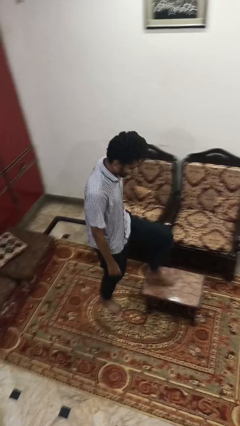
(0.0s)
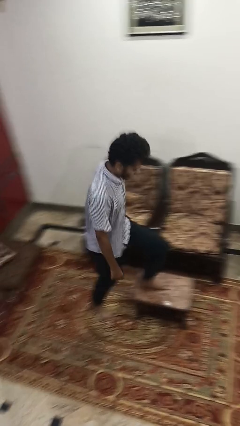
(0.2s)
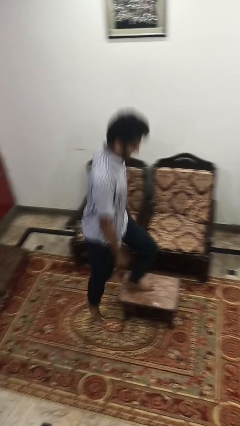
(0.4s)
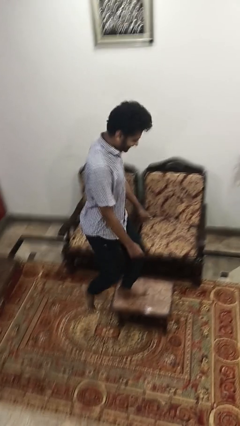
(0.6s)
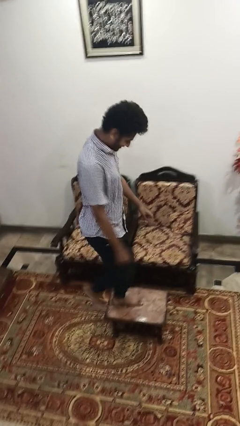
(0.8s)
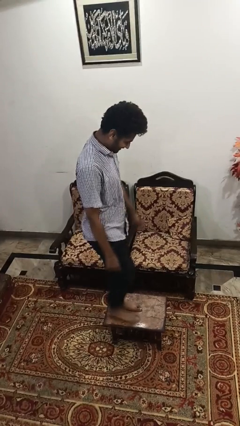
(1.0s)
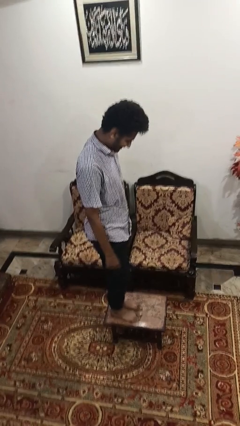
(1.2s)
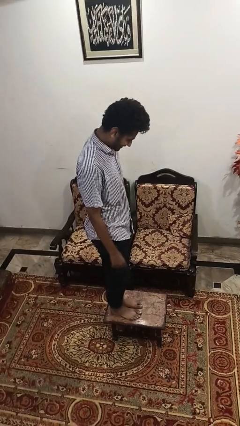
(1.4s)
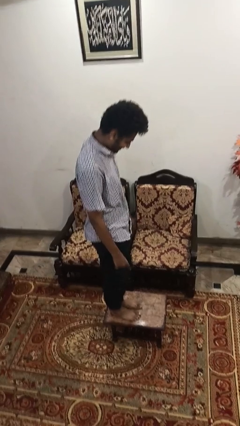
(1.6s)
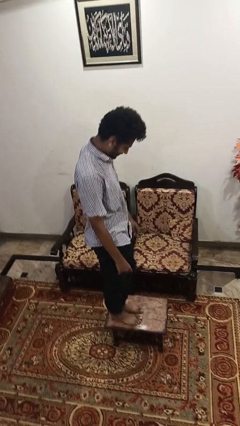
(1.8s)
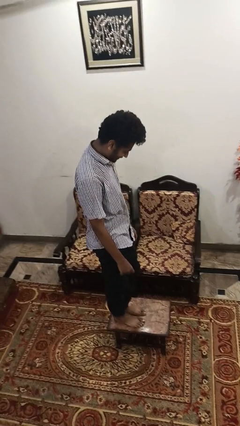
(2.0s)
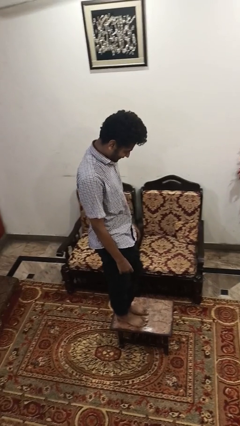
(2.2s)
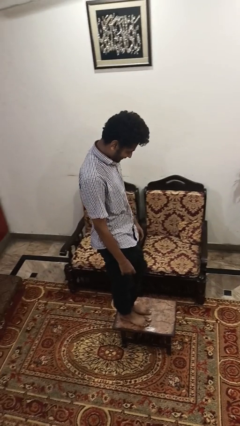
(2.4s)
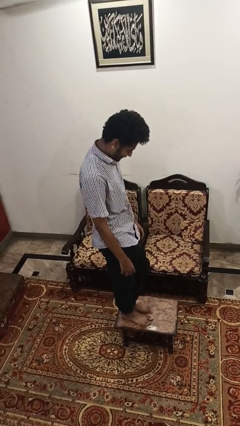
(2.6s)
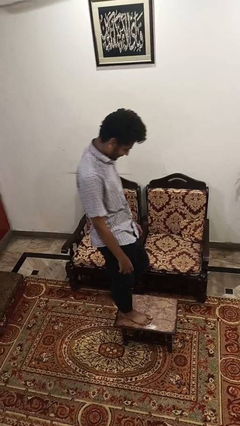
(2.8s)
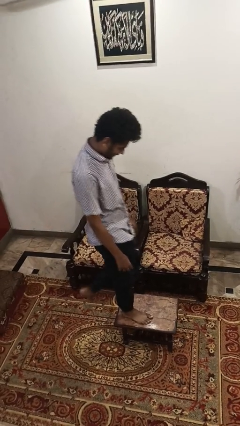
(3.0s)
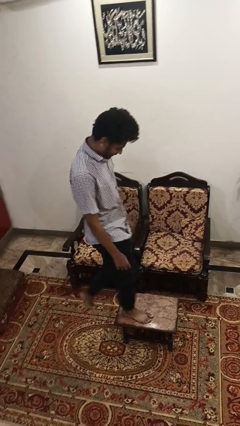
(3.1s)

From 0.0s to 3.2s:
person climbs on table

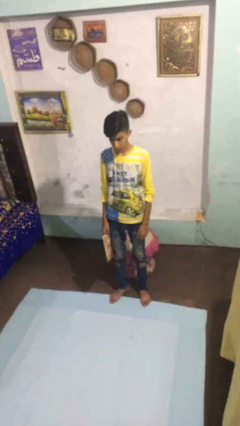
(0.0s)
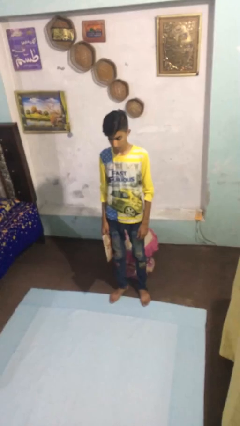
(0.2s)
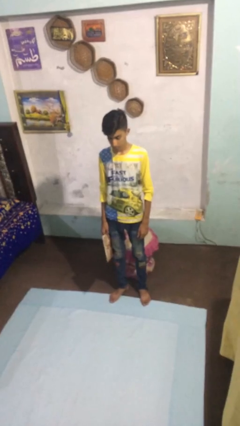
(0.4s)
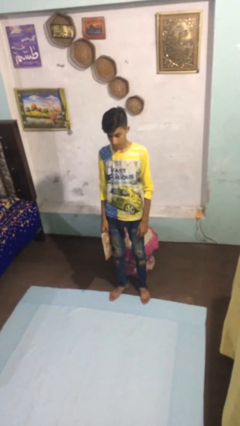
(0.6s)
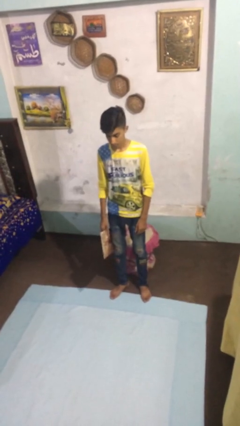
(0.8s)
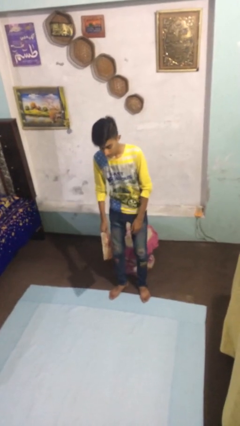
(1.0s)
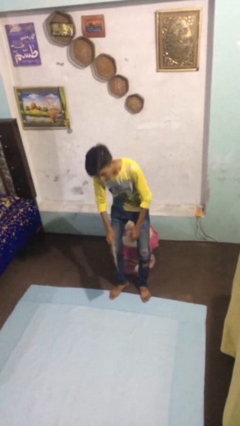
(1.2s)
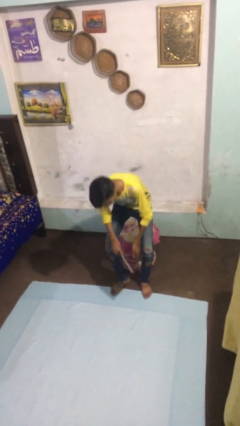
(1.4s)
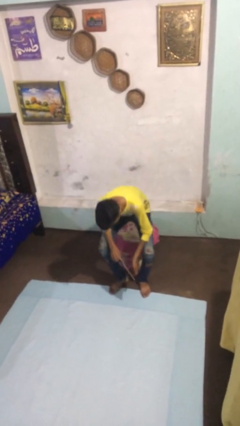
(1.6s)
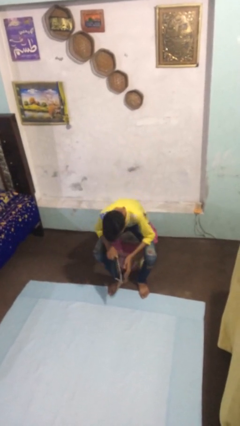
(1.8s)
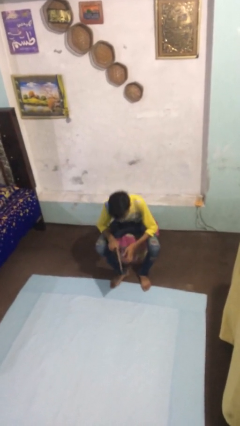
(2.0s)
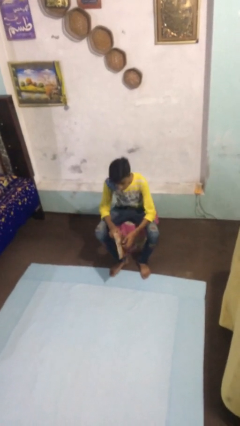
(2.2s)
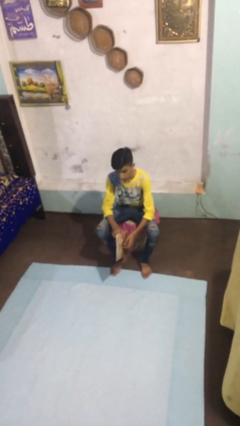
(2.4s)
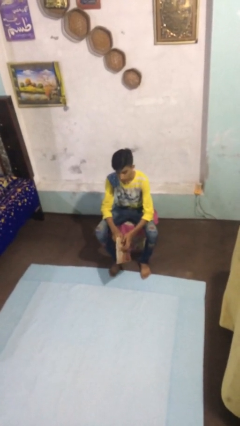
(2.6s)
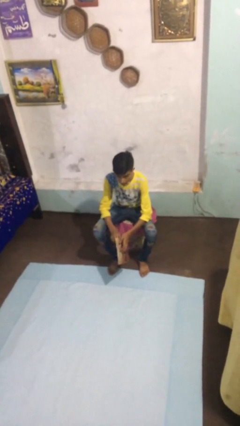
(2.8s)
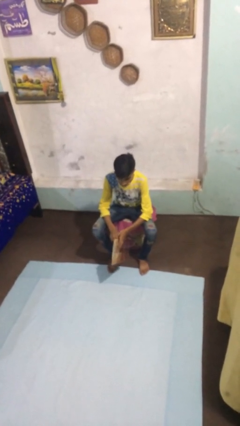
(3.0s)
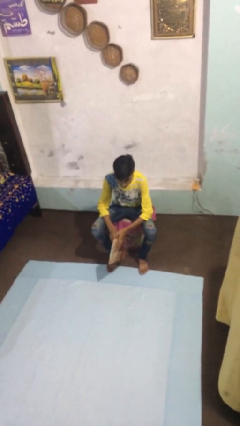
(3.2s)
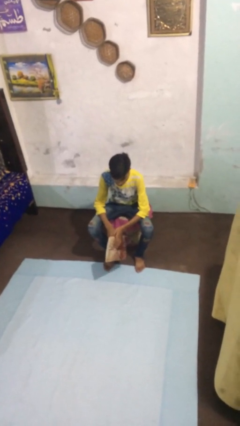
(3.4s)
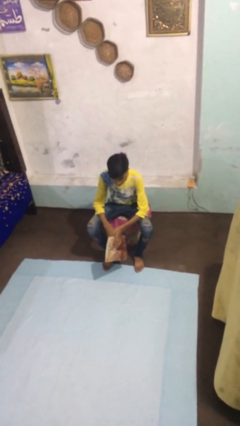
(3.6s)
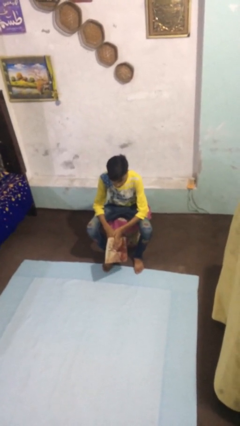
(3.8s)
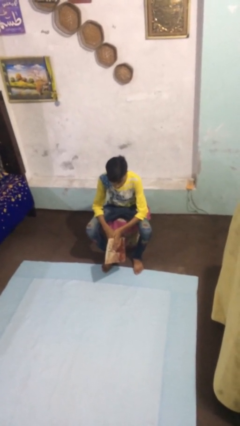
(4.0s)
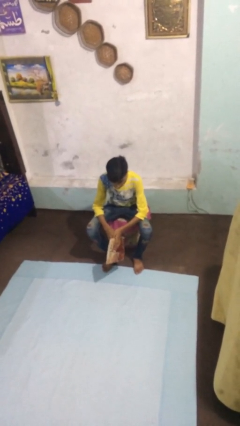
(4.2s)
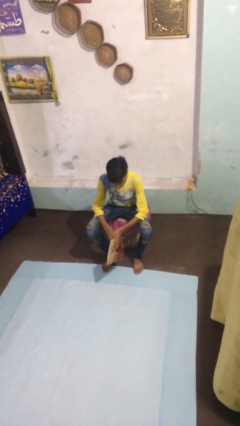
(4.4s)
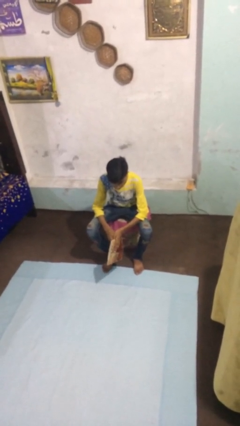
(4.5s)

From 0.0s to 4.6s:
person sits down

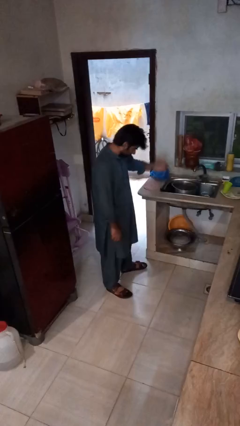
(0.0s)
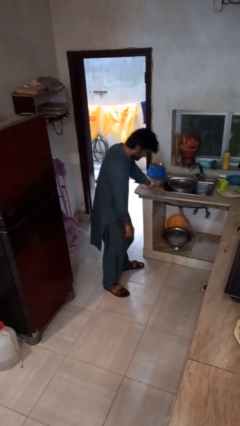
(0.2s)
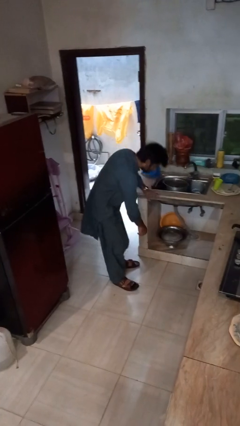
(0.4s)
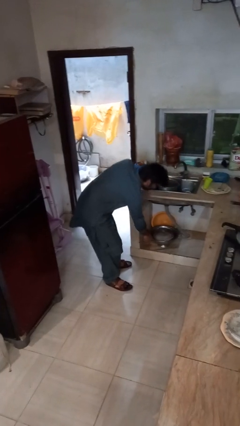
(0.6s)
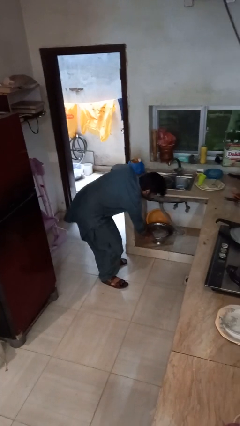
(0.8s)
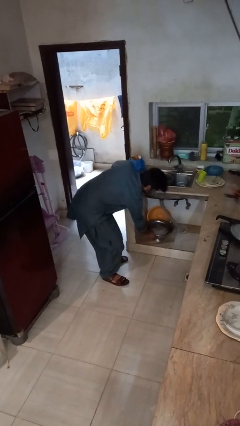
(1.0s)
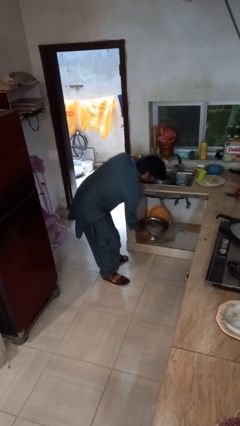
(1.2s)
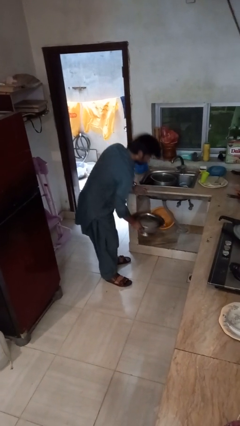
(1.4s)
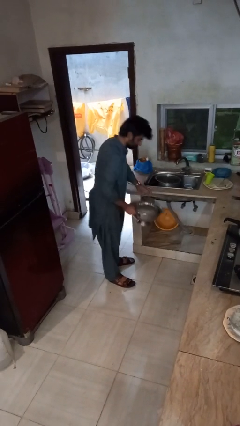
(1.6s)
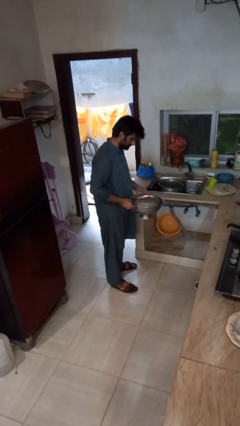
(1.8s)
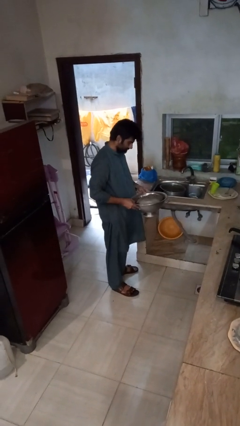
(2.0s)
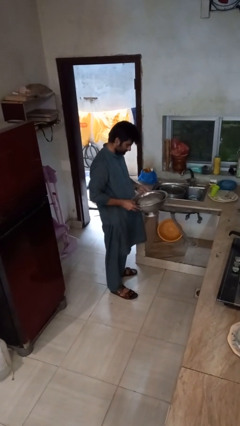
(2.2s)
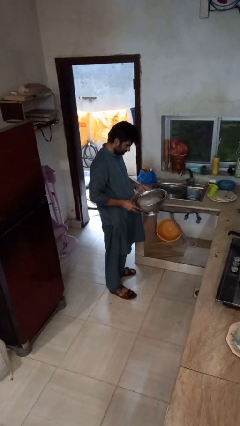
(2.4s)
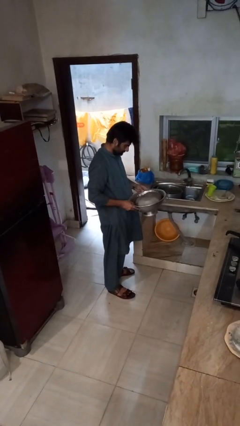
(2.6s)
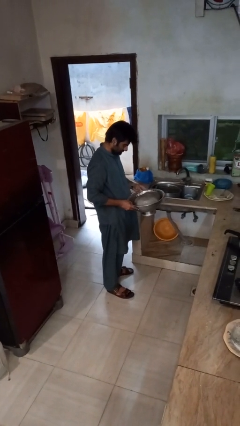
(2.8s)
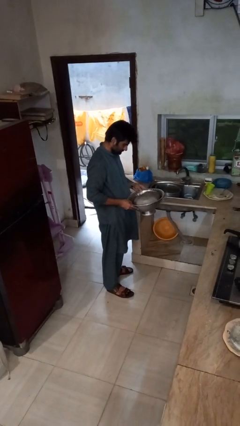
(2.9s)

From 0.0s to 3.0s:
person picks up object from cabinet

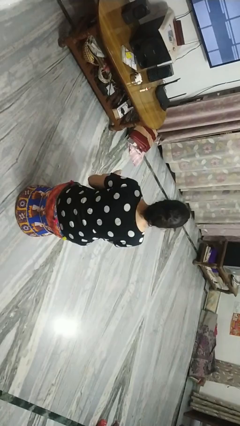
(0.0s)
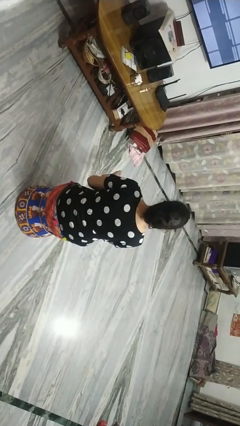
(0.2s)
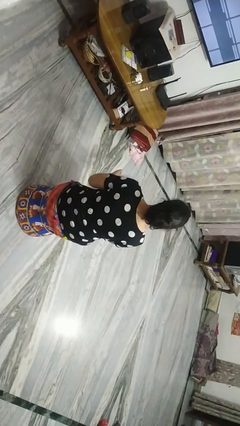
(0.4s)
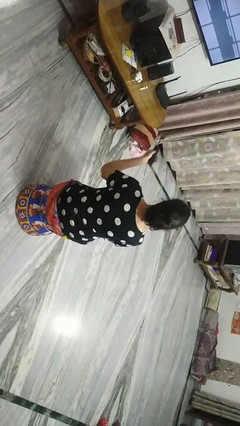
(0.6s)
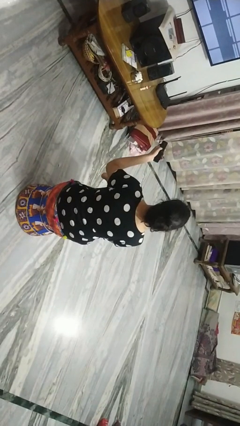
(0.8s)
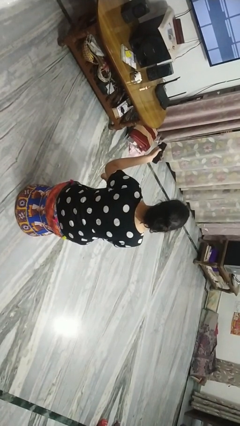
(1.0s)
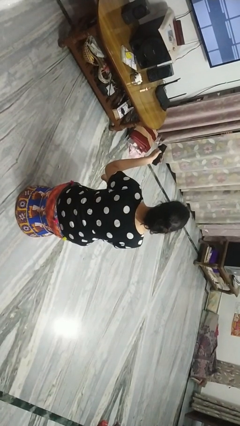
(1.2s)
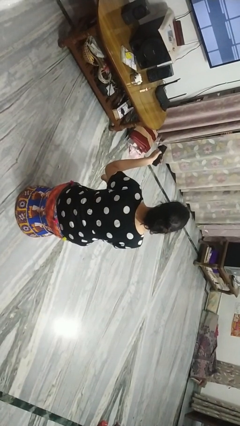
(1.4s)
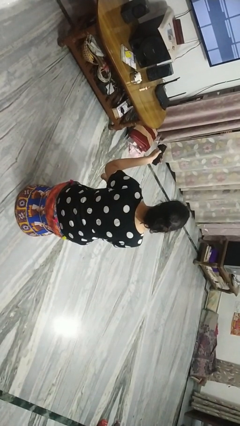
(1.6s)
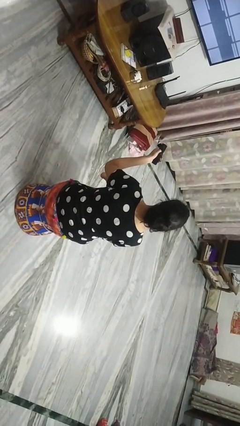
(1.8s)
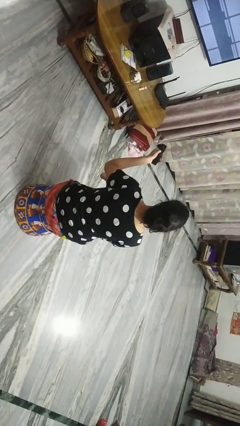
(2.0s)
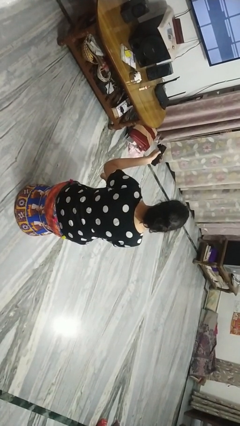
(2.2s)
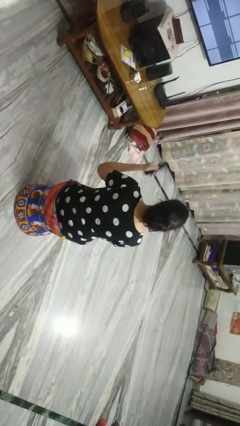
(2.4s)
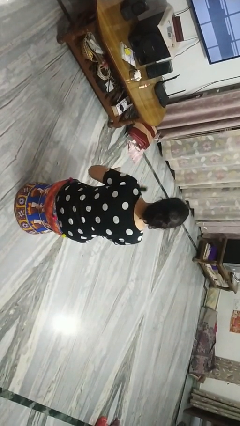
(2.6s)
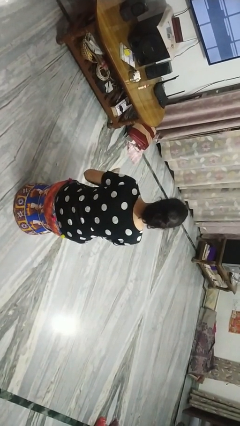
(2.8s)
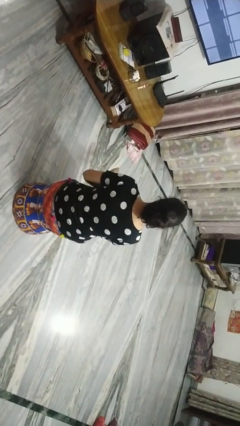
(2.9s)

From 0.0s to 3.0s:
person uses television remote

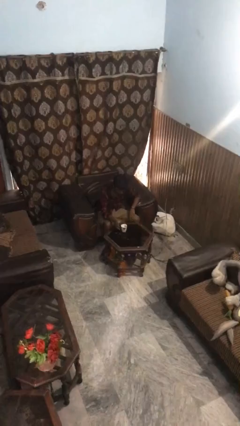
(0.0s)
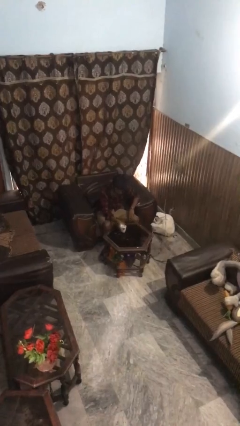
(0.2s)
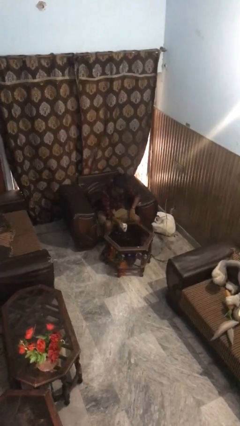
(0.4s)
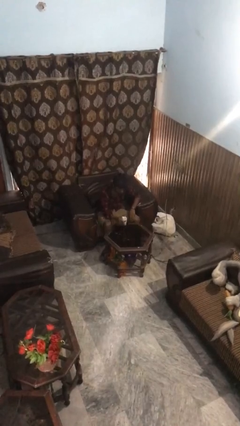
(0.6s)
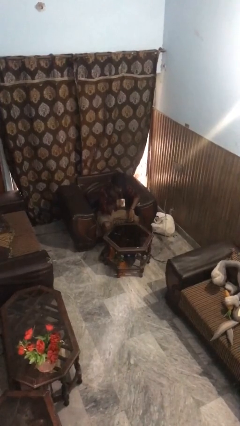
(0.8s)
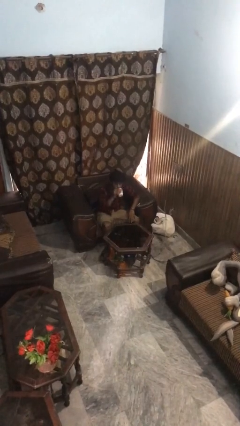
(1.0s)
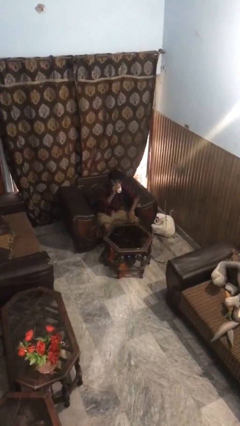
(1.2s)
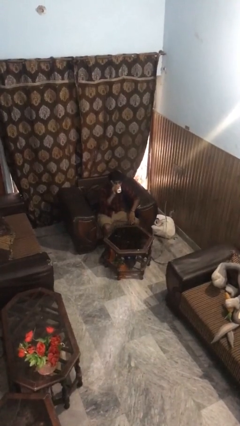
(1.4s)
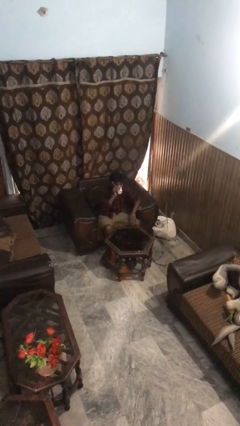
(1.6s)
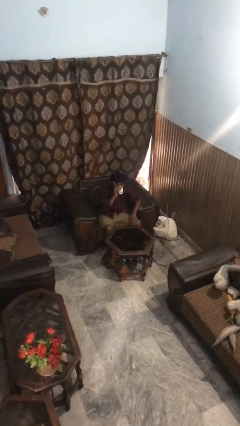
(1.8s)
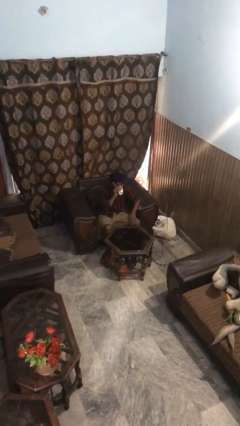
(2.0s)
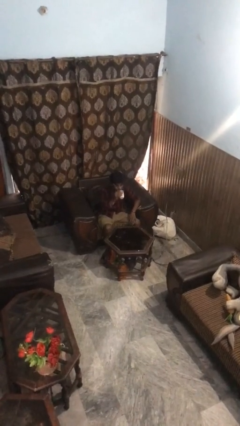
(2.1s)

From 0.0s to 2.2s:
person drinks from mug

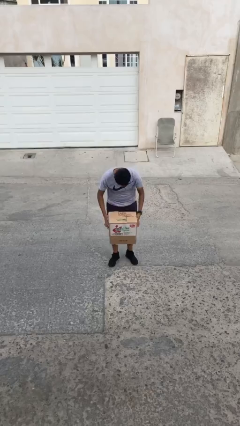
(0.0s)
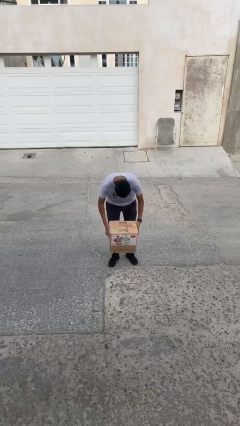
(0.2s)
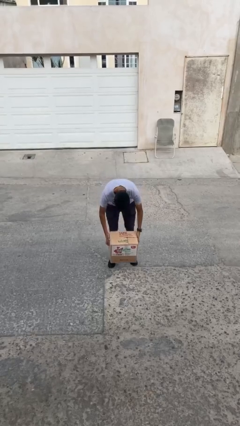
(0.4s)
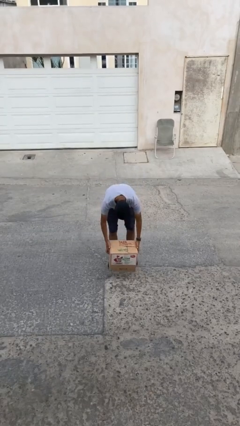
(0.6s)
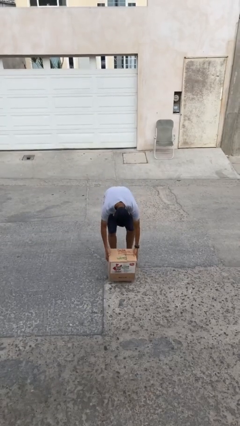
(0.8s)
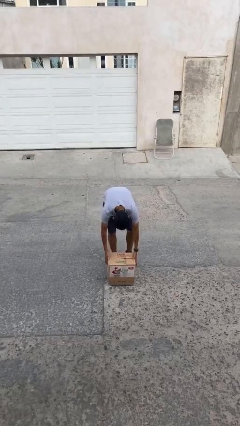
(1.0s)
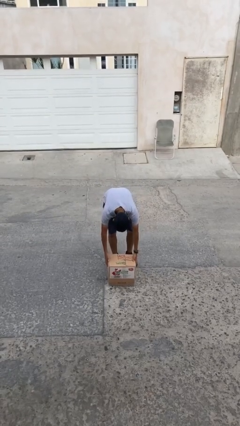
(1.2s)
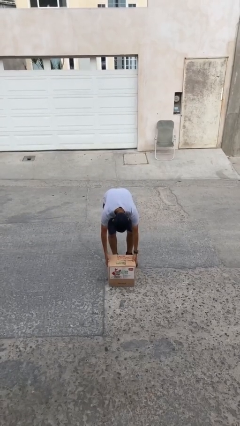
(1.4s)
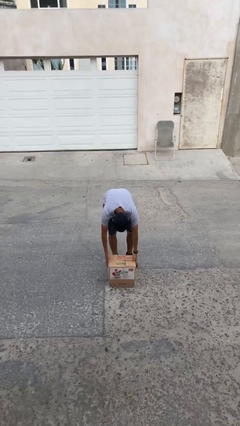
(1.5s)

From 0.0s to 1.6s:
person puts down object on floor
